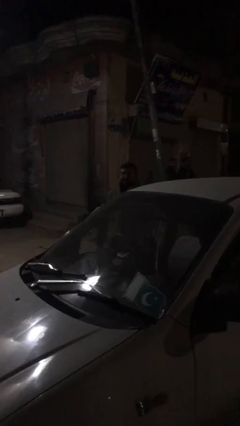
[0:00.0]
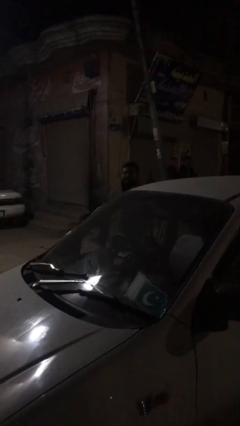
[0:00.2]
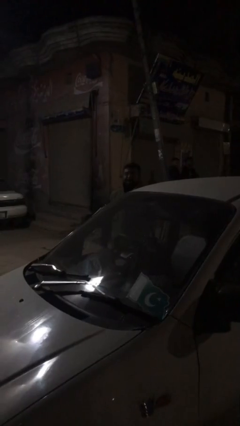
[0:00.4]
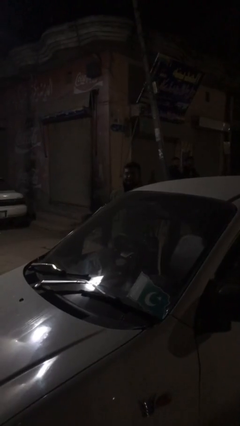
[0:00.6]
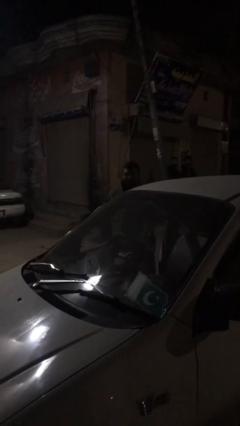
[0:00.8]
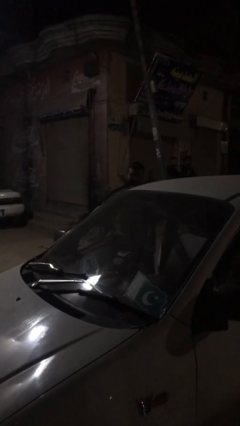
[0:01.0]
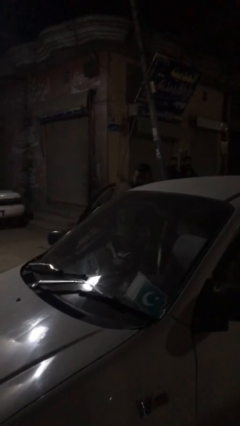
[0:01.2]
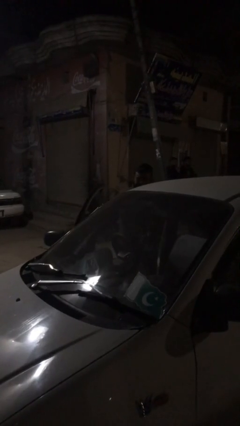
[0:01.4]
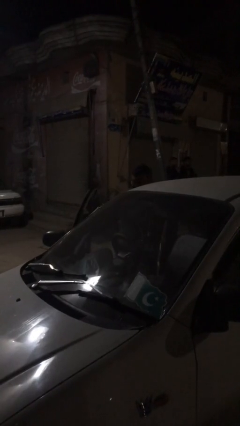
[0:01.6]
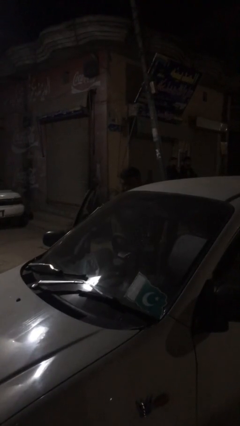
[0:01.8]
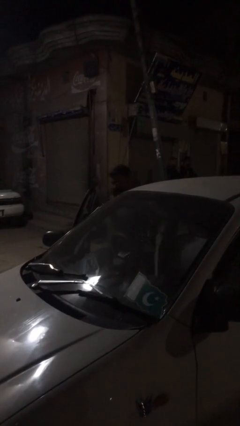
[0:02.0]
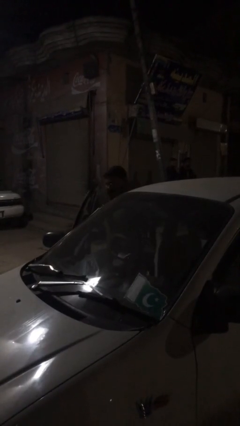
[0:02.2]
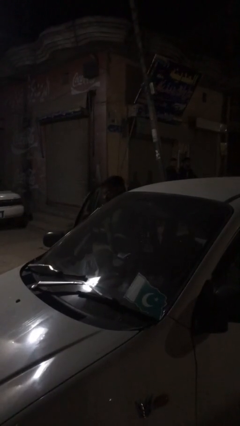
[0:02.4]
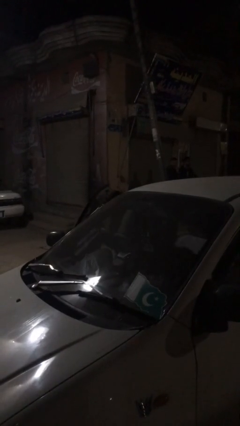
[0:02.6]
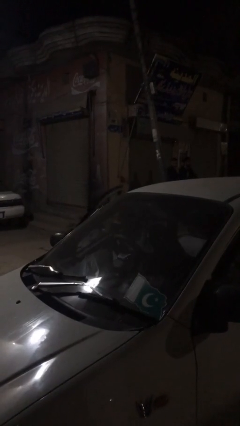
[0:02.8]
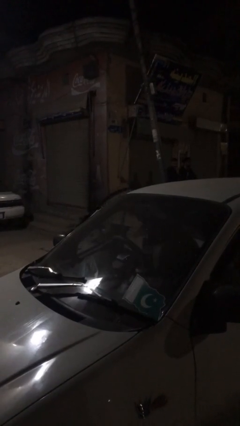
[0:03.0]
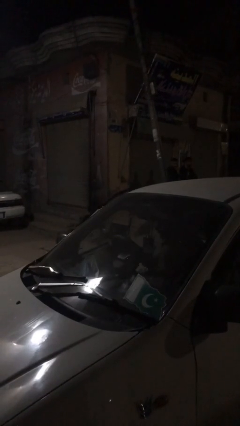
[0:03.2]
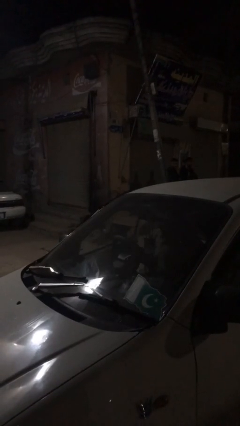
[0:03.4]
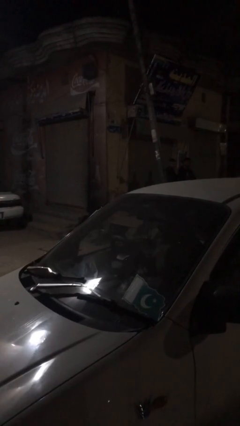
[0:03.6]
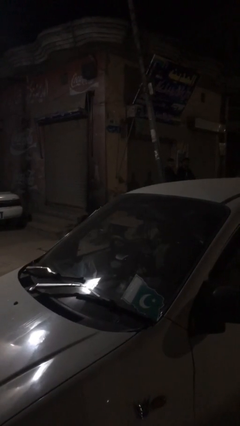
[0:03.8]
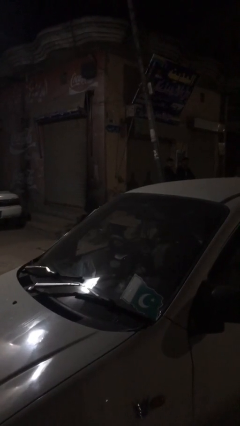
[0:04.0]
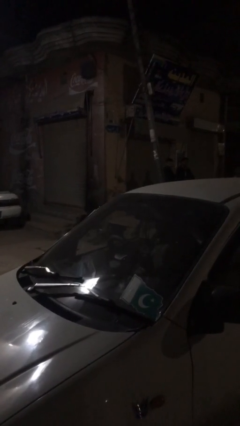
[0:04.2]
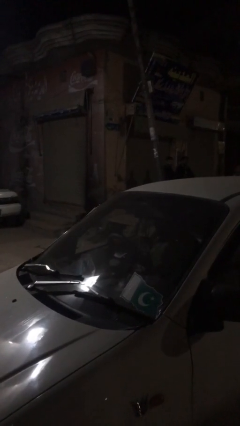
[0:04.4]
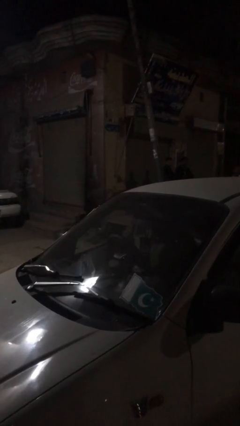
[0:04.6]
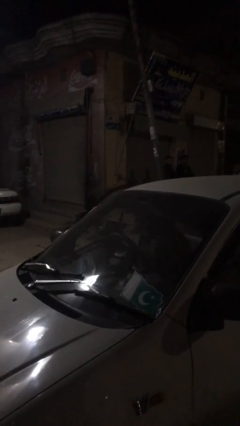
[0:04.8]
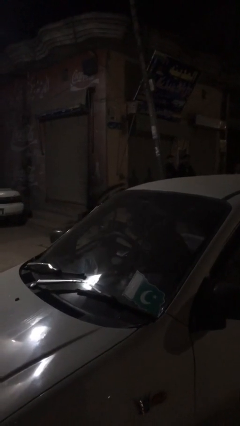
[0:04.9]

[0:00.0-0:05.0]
person enters car

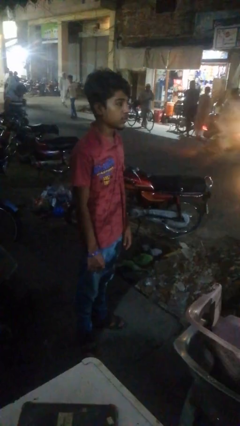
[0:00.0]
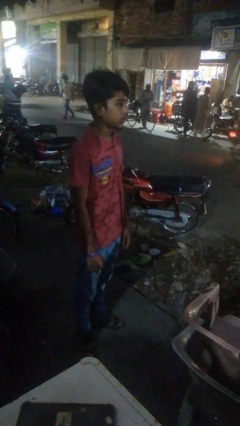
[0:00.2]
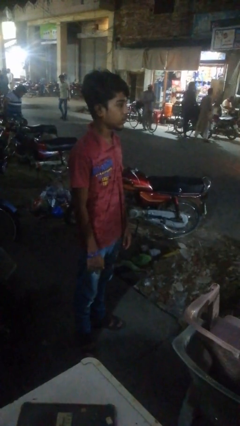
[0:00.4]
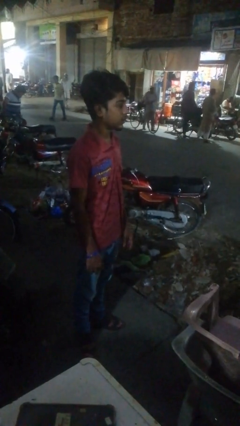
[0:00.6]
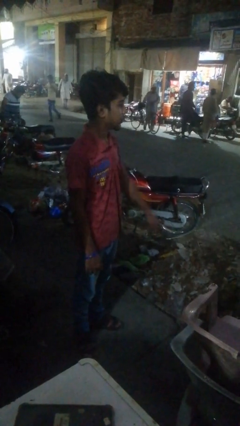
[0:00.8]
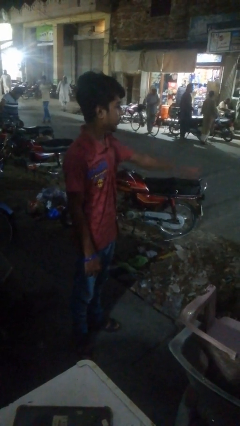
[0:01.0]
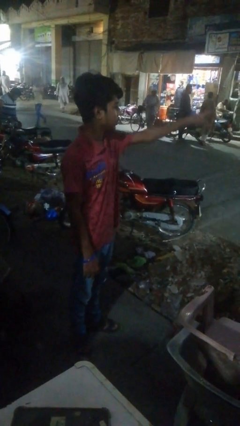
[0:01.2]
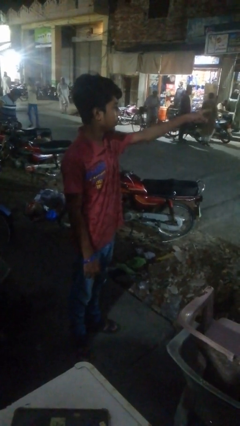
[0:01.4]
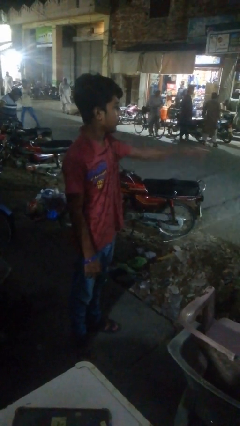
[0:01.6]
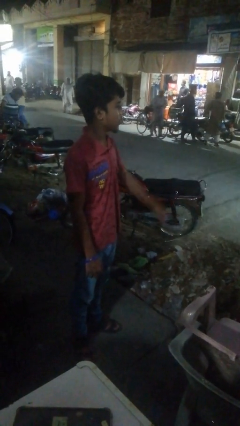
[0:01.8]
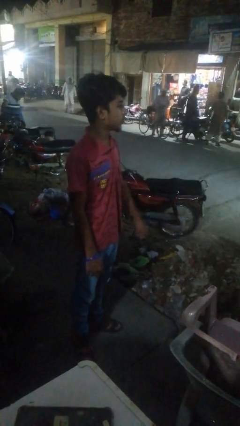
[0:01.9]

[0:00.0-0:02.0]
person points at person

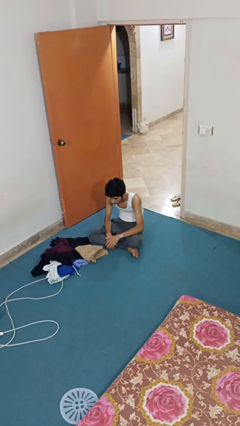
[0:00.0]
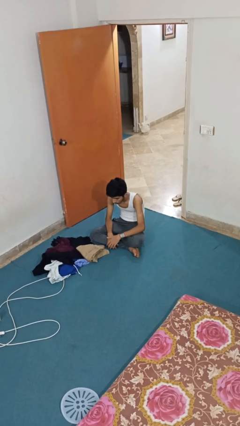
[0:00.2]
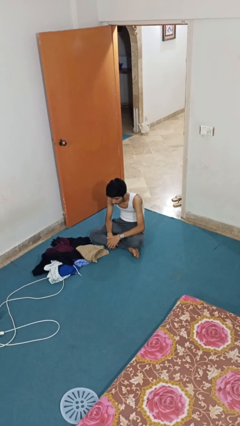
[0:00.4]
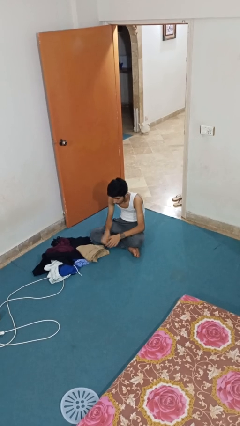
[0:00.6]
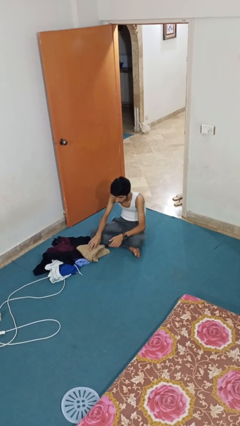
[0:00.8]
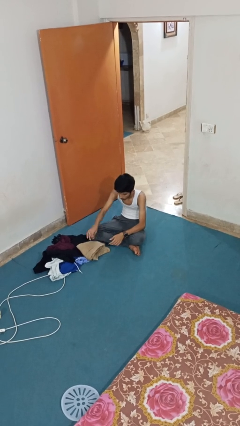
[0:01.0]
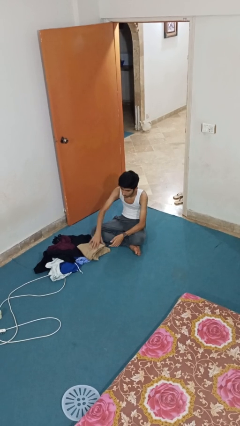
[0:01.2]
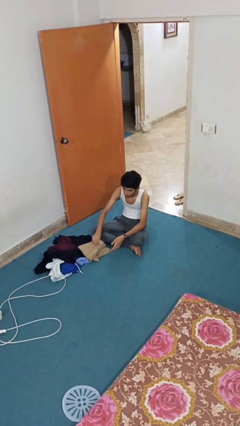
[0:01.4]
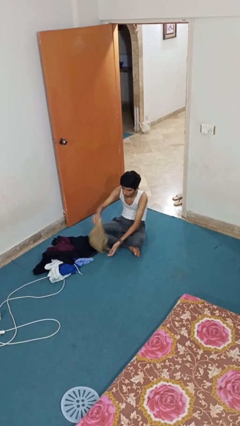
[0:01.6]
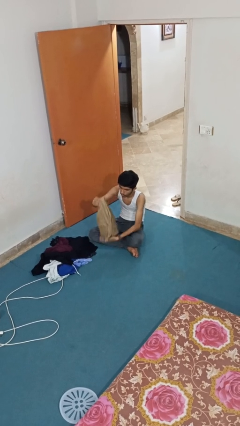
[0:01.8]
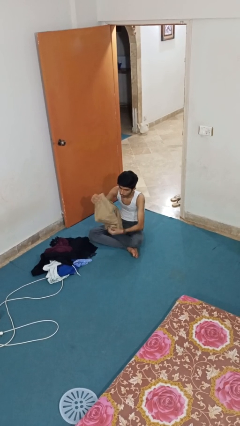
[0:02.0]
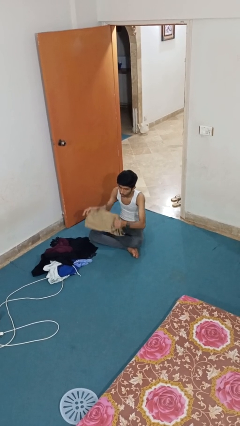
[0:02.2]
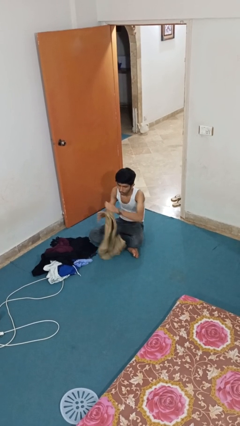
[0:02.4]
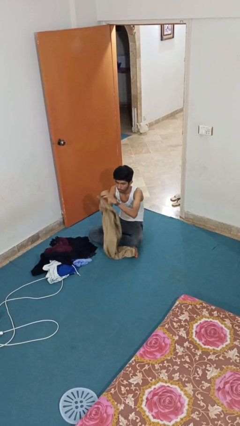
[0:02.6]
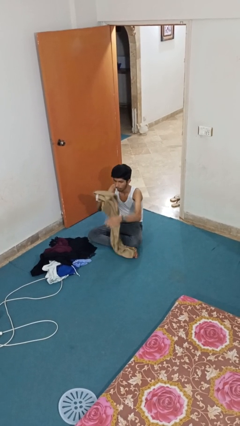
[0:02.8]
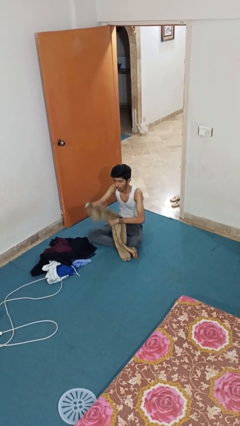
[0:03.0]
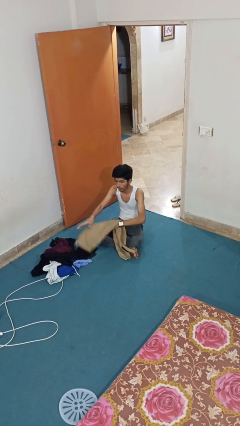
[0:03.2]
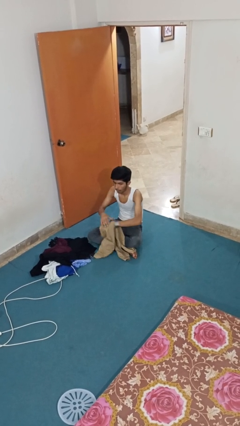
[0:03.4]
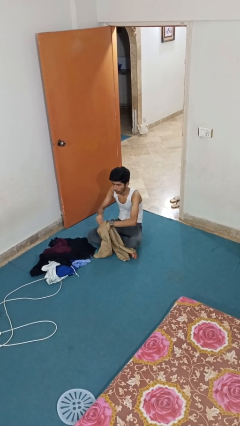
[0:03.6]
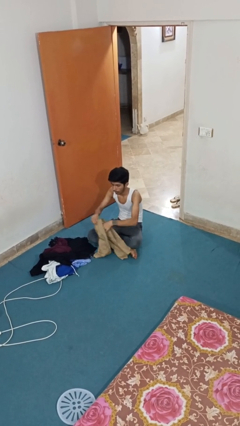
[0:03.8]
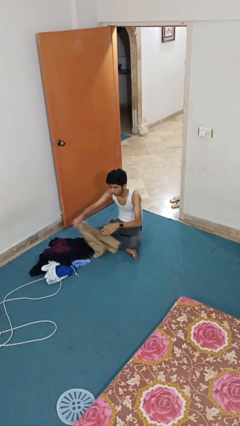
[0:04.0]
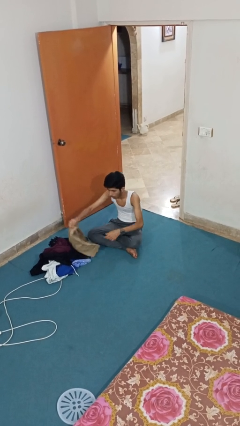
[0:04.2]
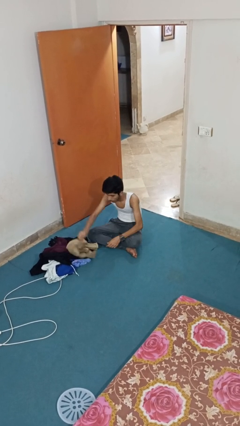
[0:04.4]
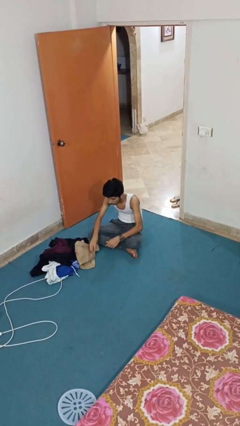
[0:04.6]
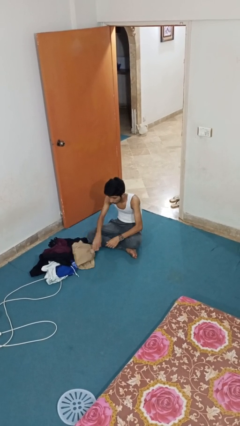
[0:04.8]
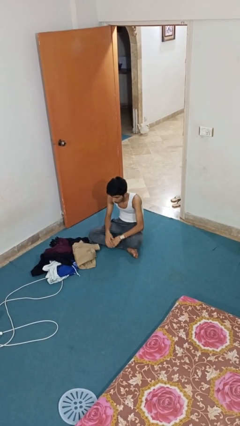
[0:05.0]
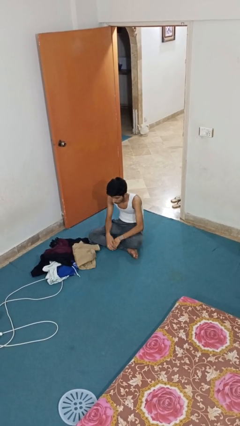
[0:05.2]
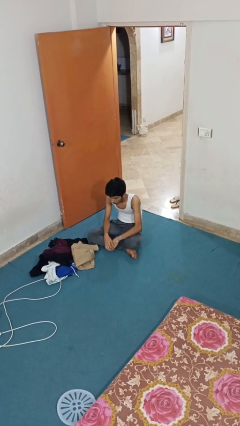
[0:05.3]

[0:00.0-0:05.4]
person folds pants

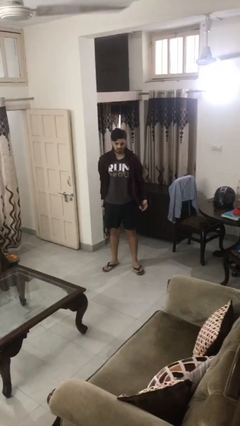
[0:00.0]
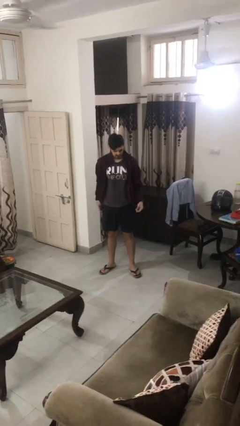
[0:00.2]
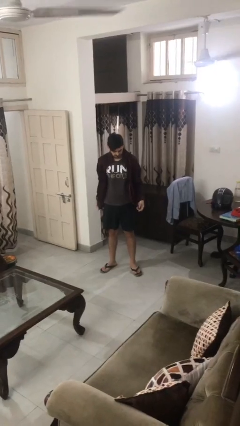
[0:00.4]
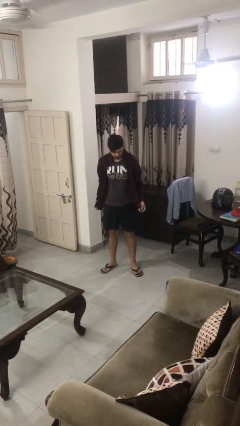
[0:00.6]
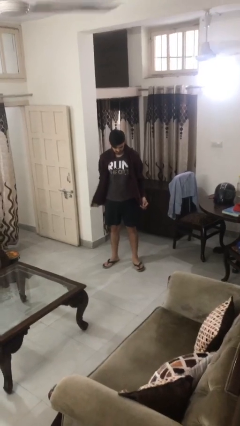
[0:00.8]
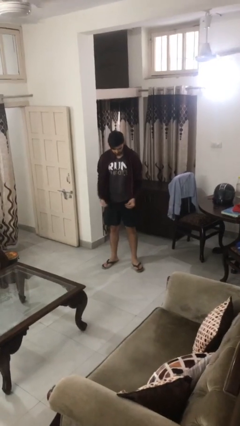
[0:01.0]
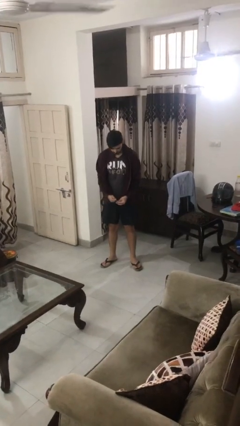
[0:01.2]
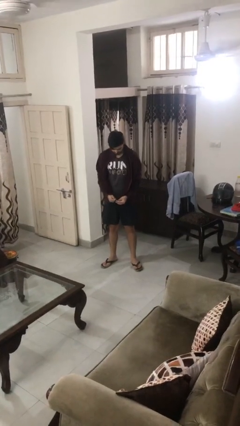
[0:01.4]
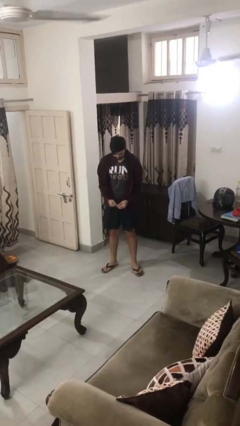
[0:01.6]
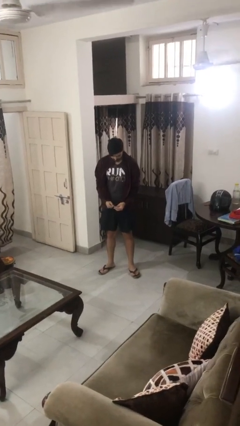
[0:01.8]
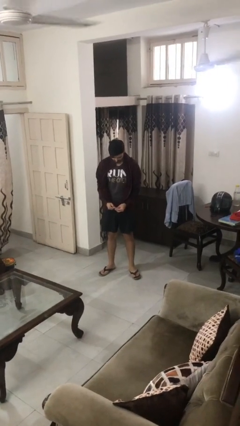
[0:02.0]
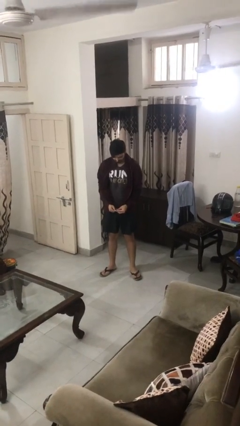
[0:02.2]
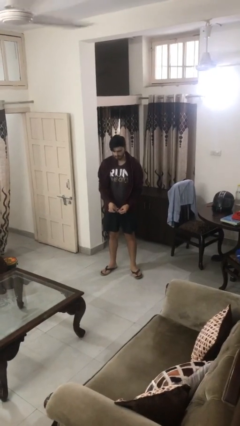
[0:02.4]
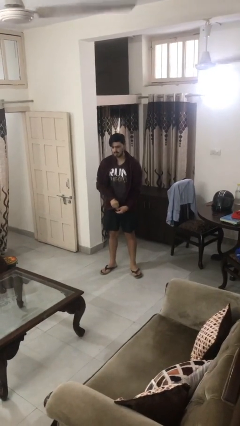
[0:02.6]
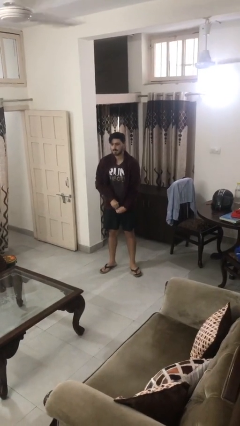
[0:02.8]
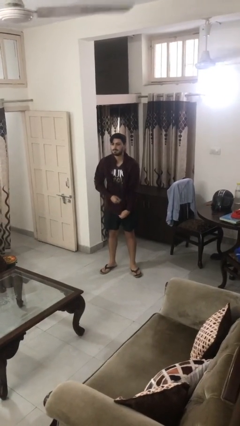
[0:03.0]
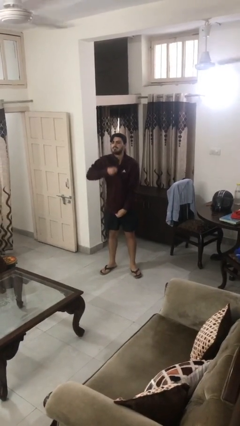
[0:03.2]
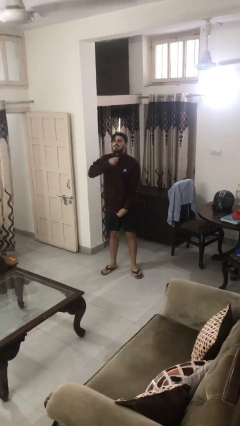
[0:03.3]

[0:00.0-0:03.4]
person zips up jacket

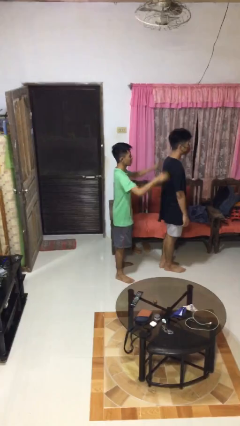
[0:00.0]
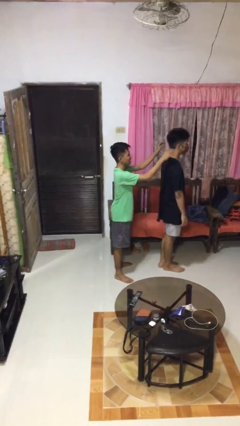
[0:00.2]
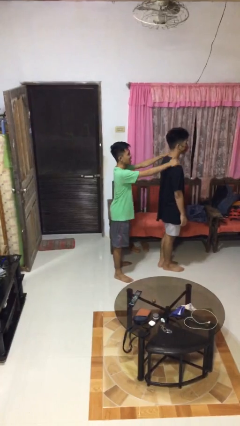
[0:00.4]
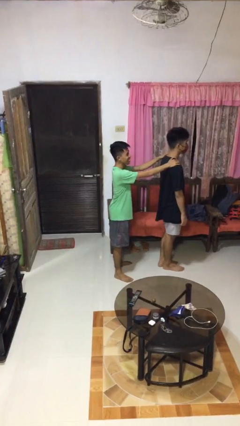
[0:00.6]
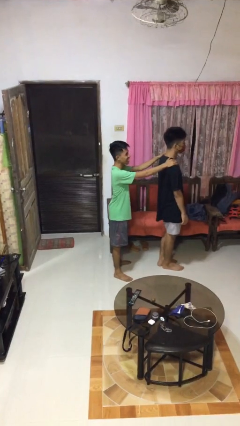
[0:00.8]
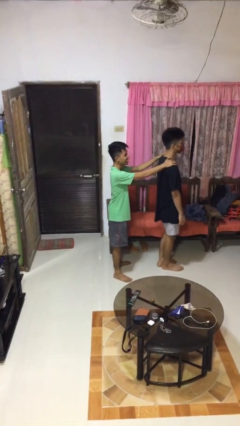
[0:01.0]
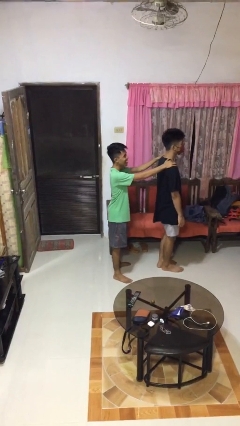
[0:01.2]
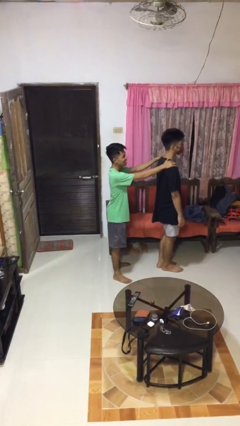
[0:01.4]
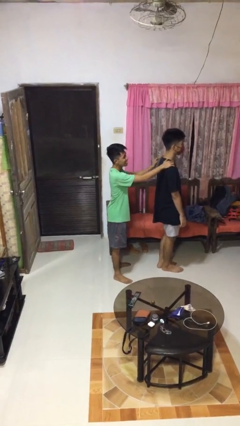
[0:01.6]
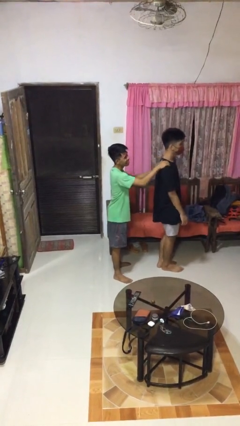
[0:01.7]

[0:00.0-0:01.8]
person grabs person by shoulder
